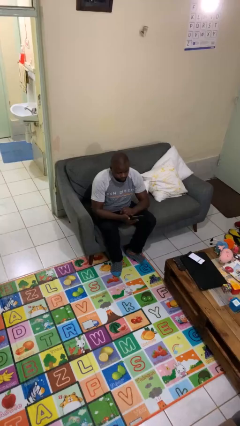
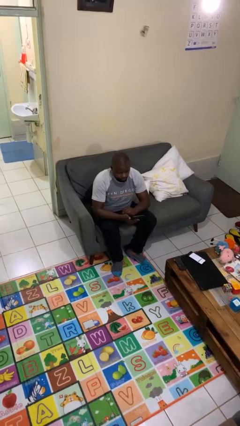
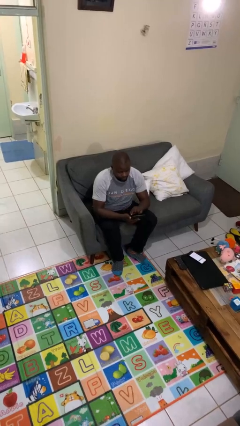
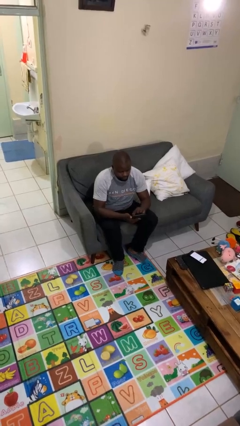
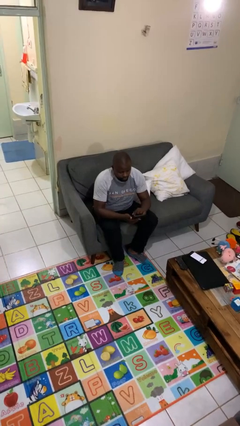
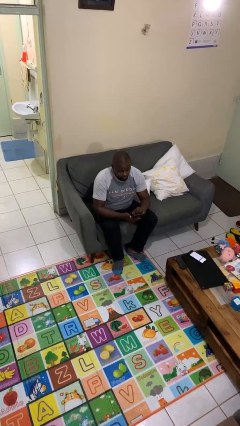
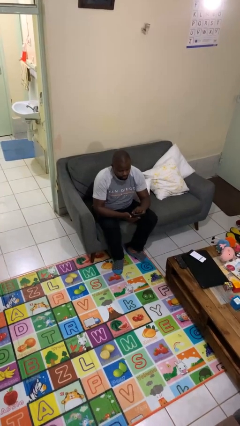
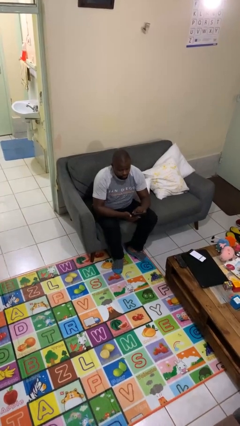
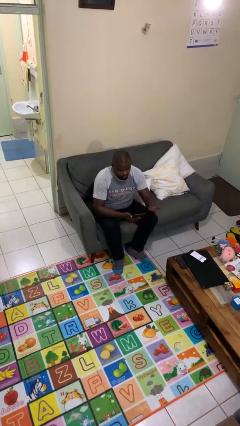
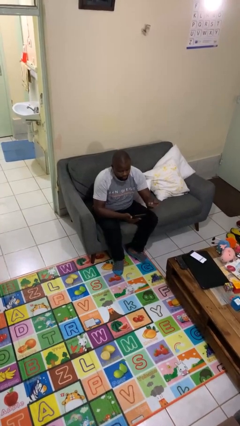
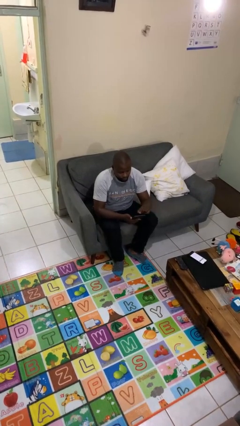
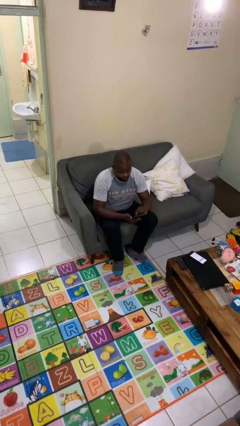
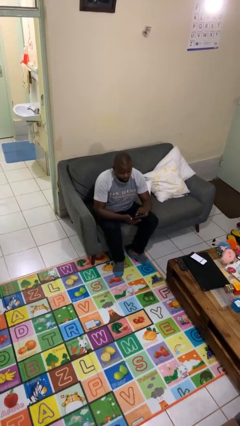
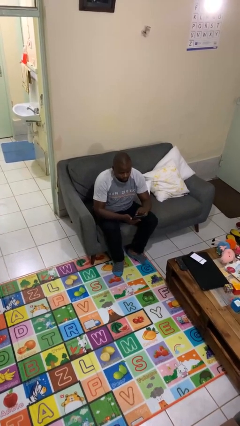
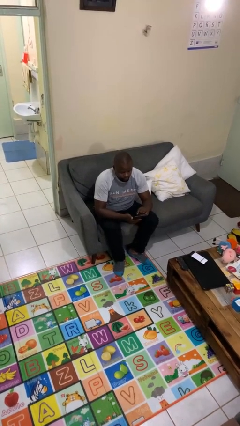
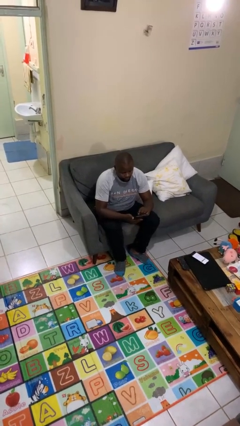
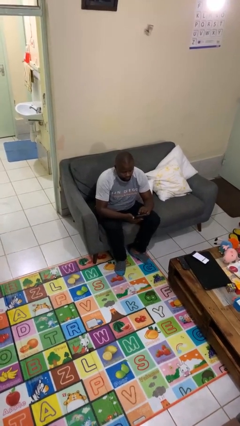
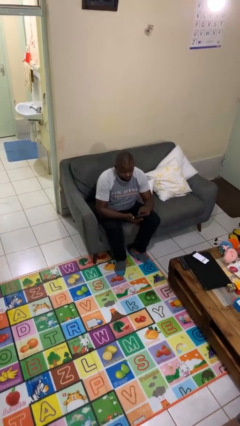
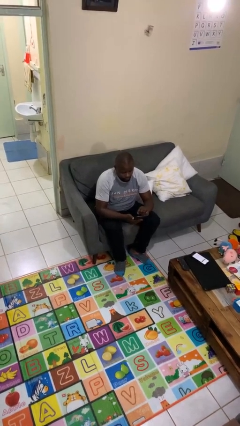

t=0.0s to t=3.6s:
person interacts with tablet

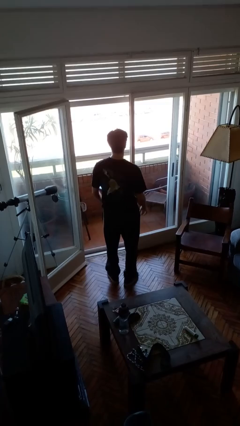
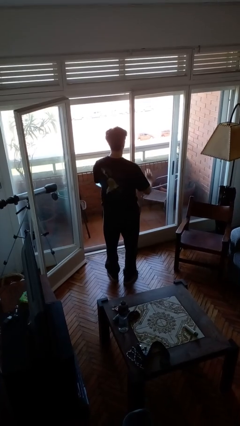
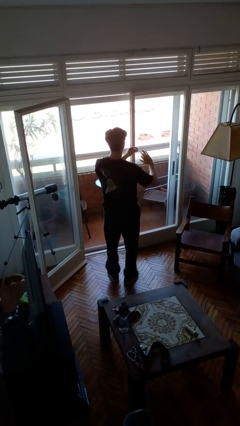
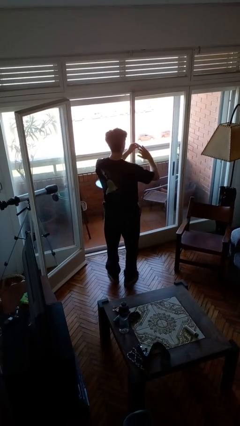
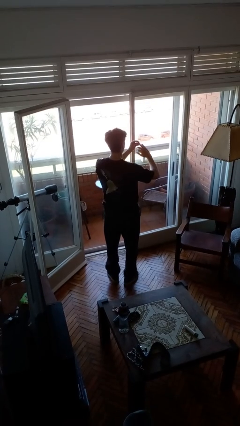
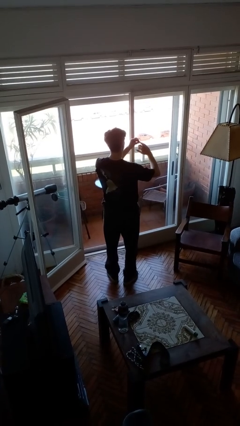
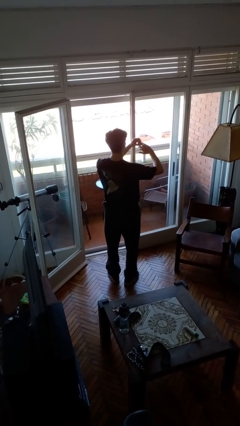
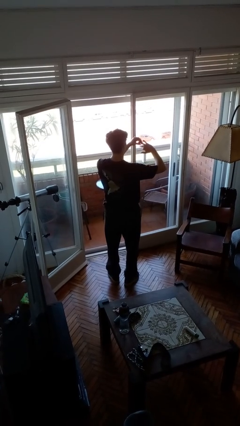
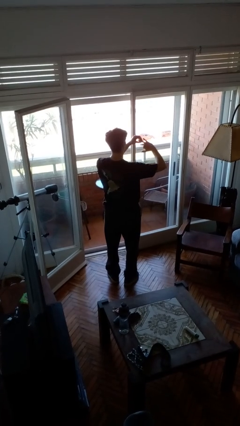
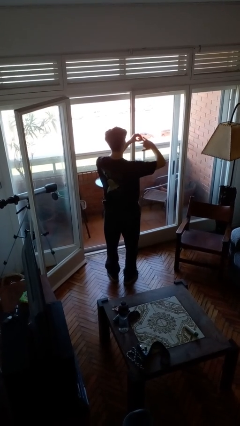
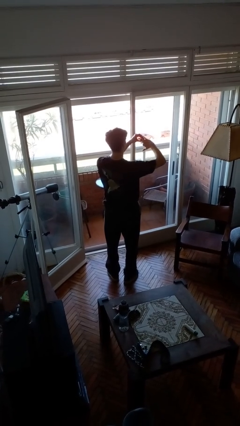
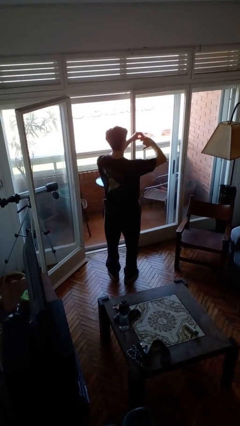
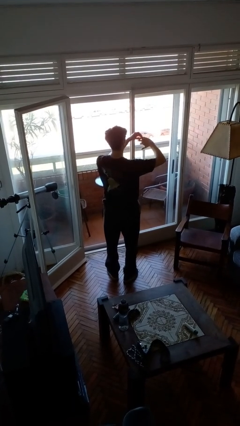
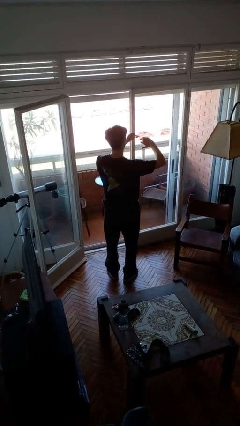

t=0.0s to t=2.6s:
person puts on ring

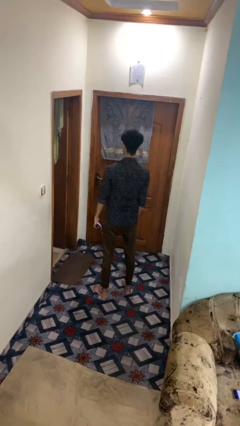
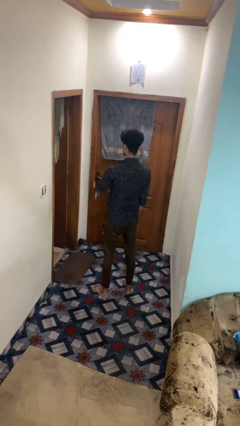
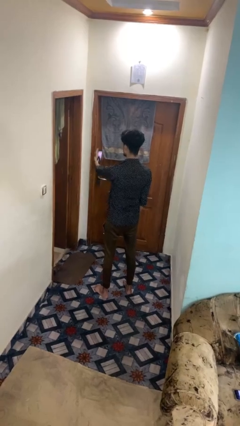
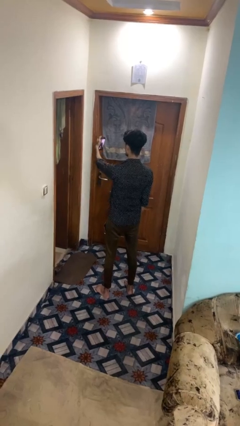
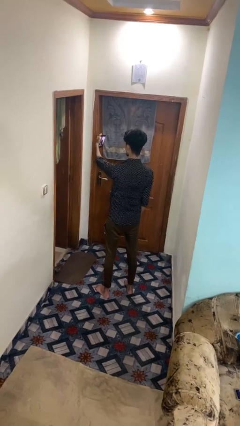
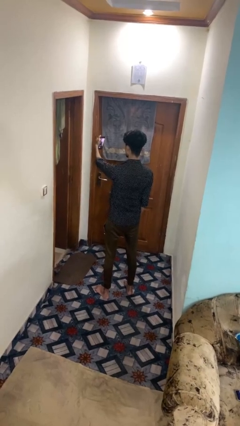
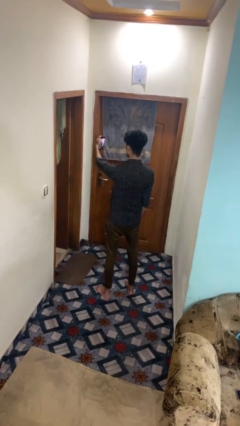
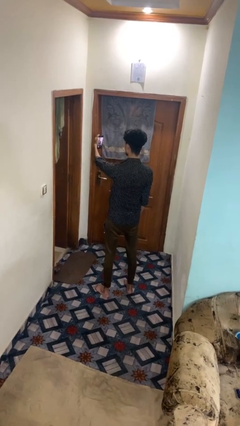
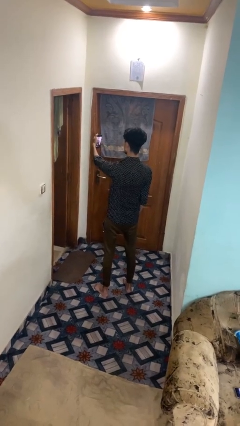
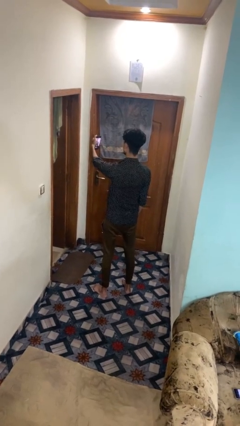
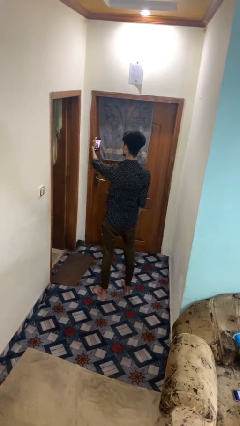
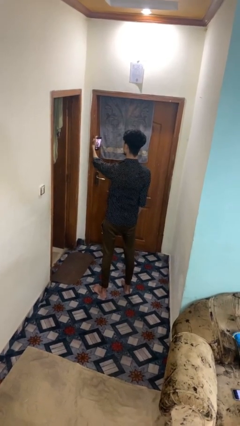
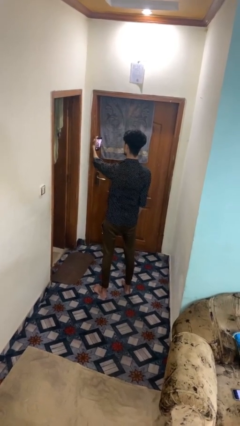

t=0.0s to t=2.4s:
person takes selfie

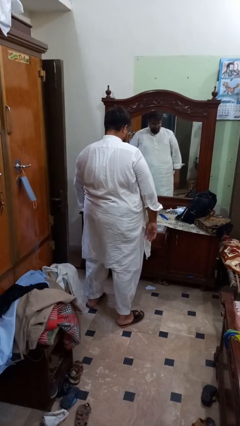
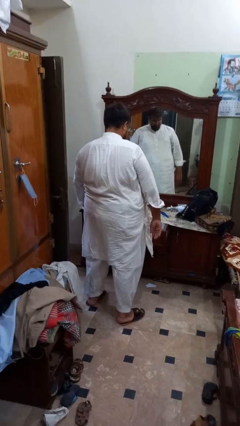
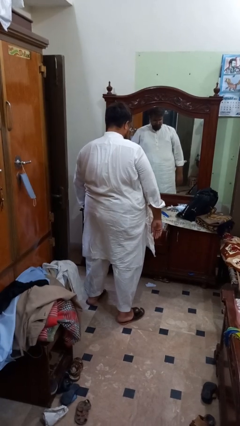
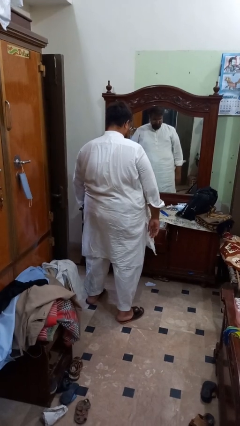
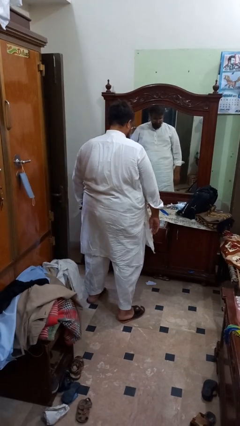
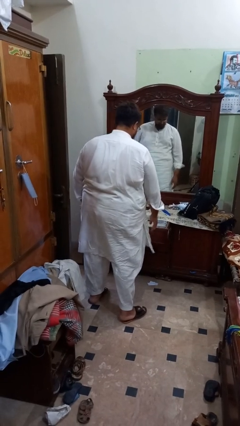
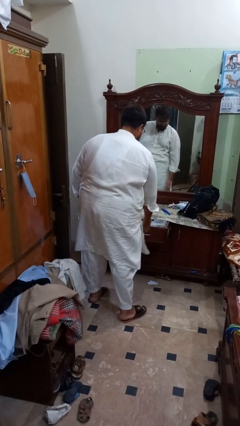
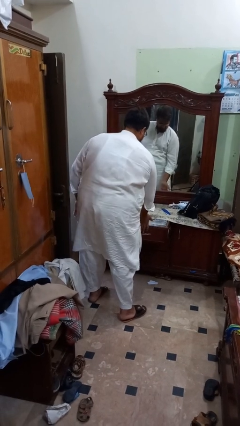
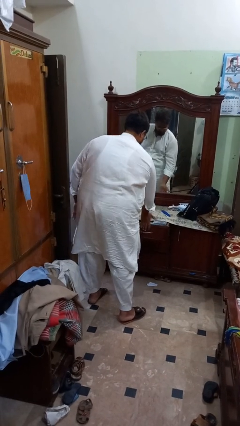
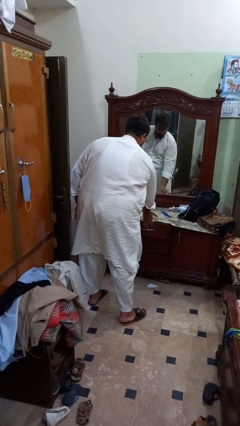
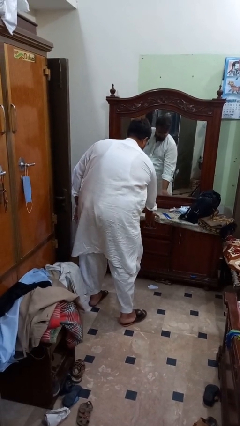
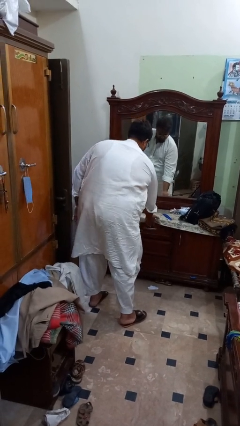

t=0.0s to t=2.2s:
person closes dresser drawer

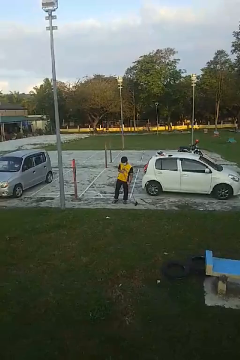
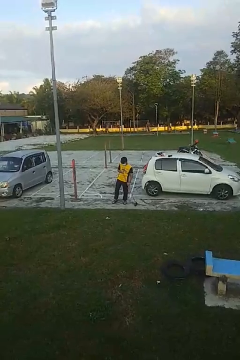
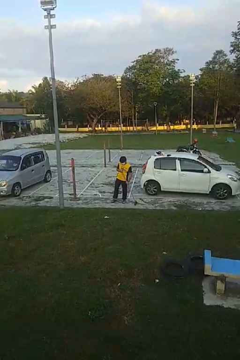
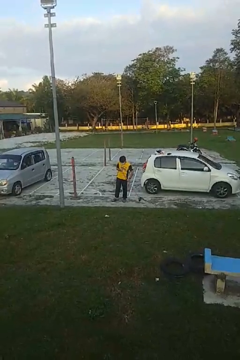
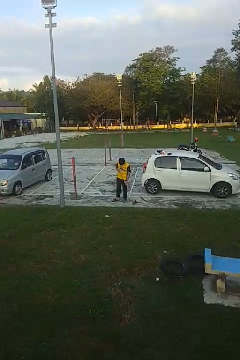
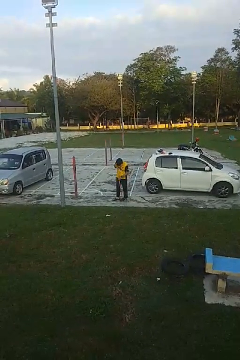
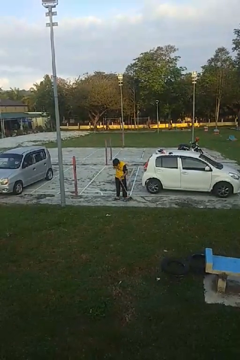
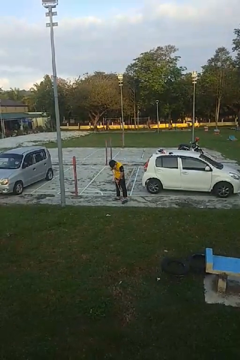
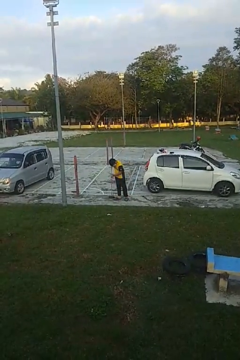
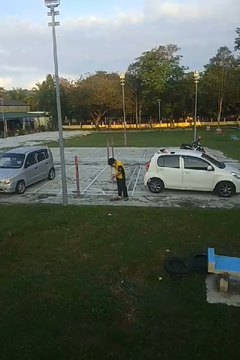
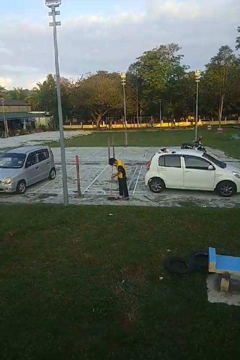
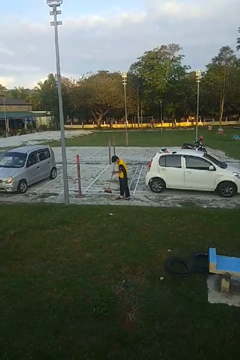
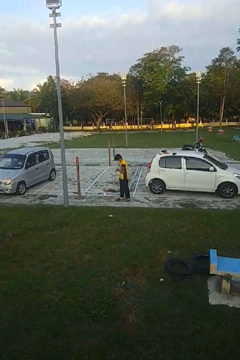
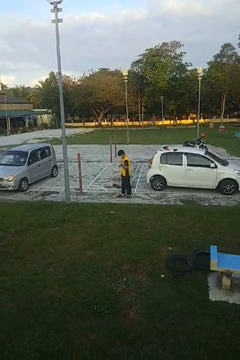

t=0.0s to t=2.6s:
person sweeps floor

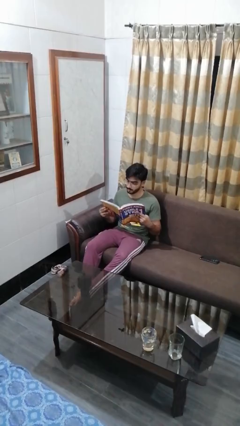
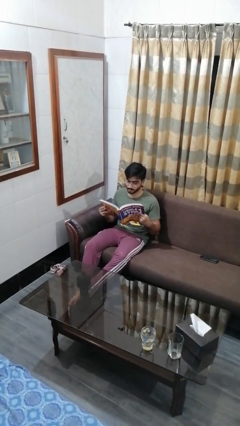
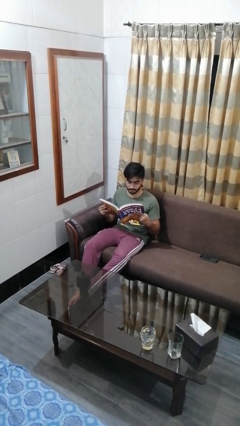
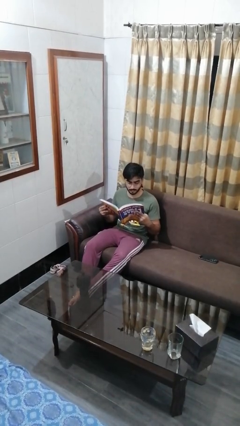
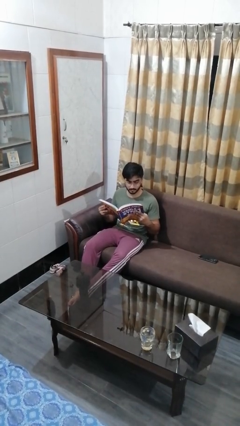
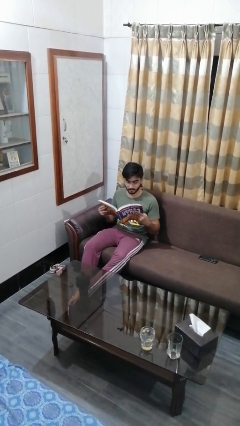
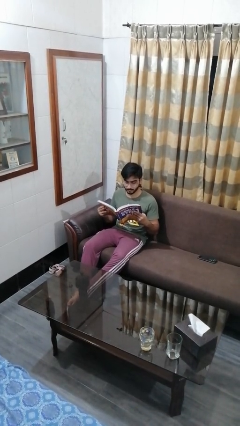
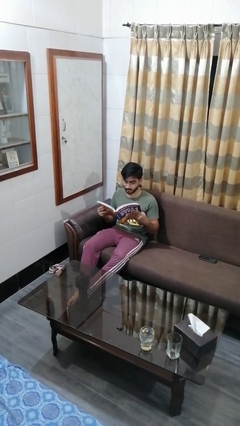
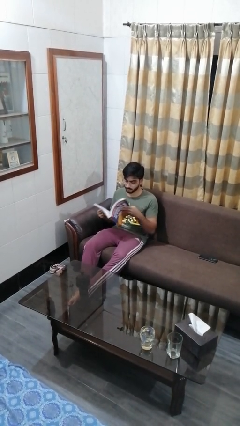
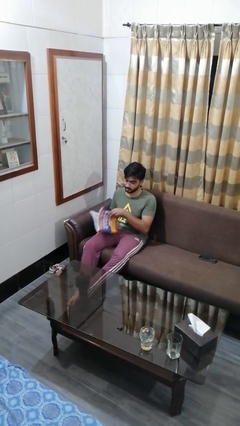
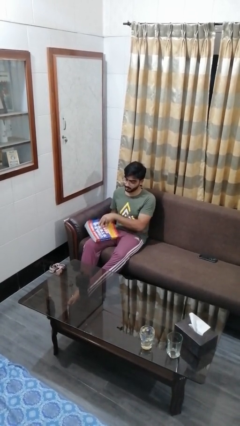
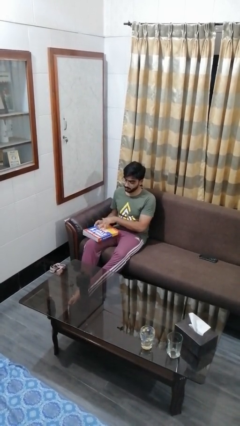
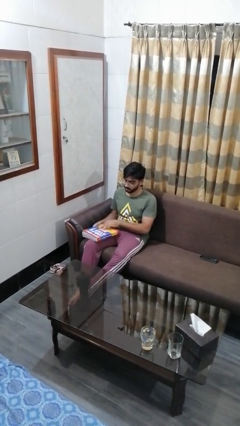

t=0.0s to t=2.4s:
person reads book

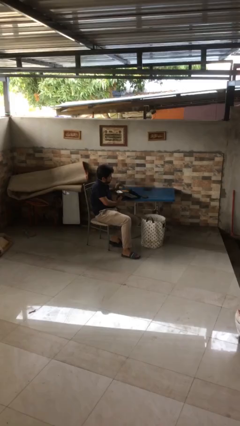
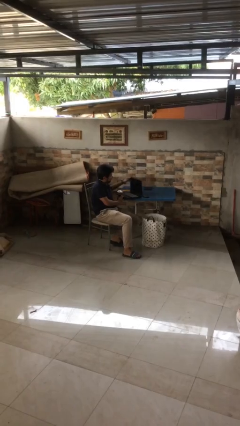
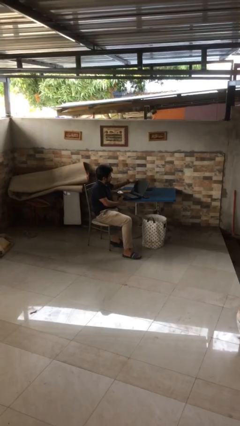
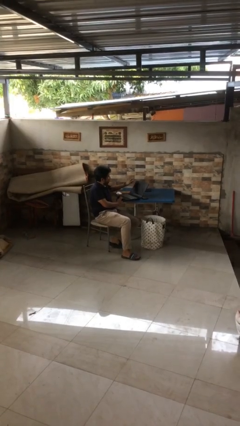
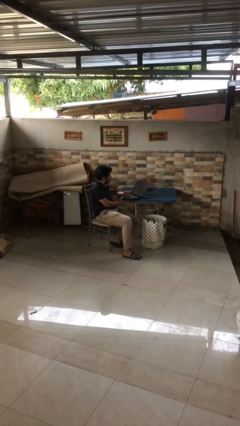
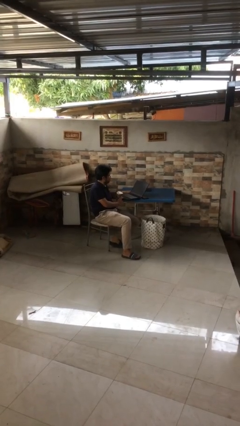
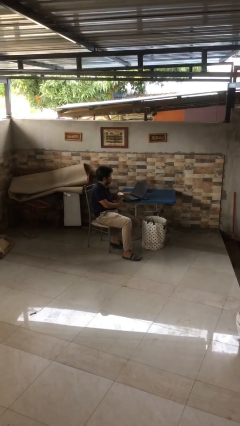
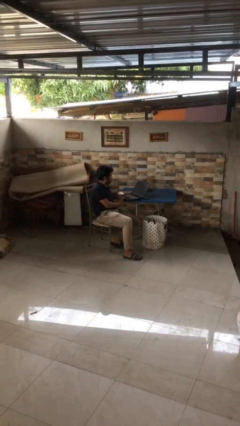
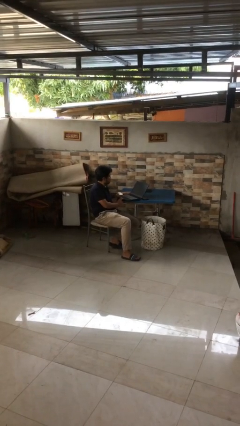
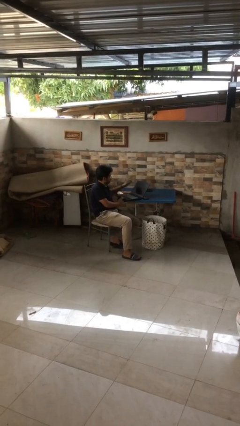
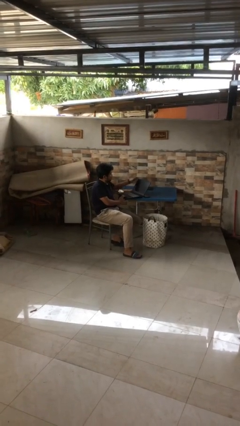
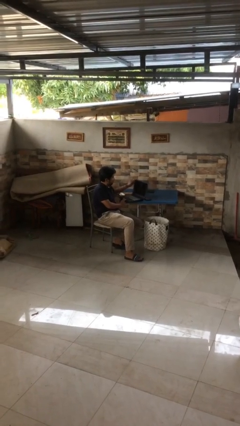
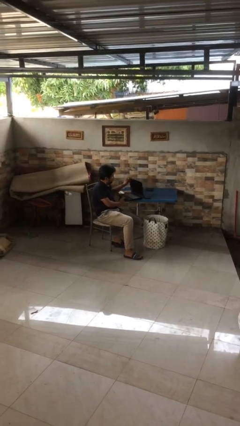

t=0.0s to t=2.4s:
person opens laptop
